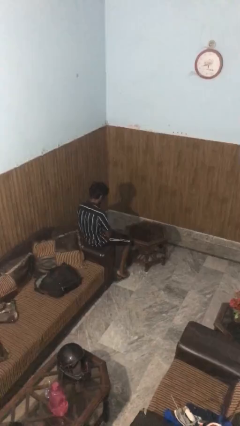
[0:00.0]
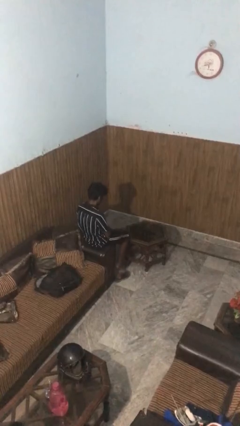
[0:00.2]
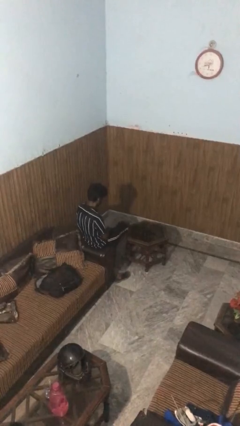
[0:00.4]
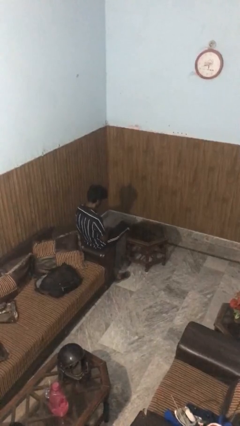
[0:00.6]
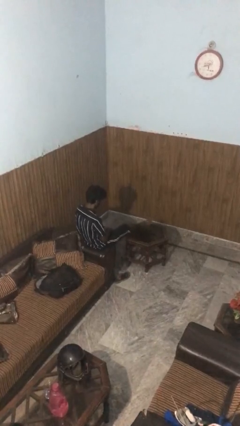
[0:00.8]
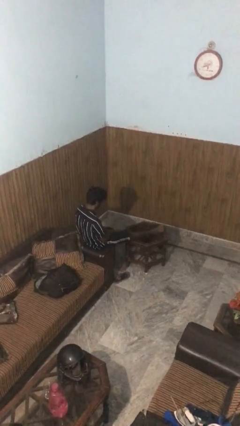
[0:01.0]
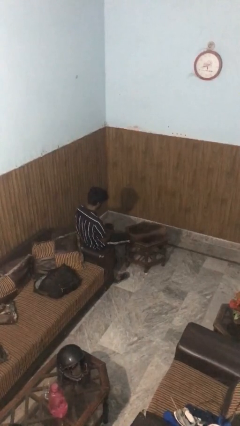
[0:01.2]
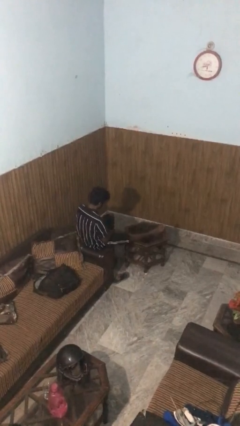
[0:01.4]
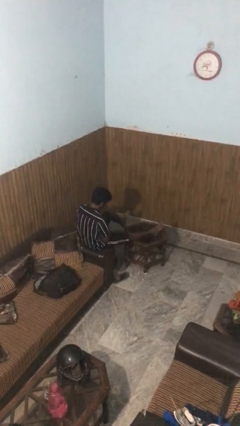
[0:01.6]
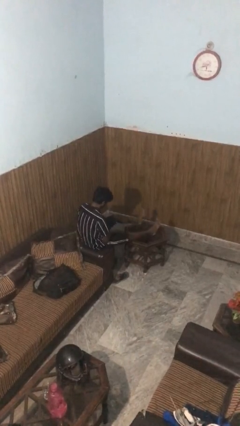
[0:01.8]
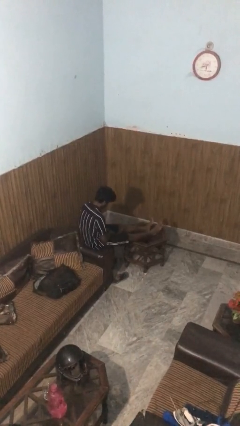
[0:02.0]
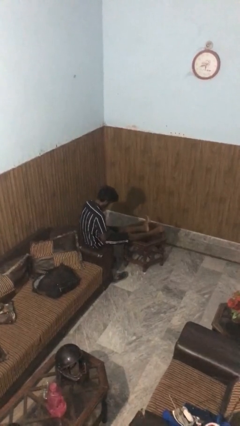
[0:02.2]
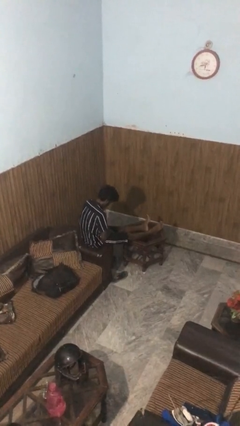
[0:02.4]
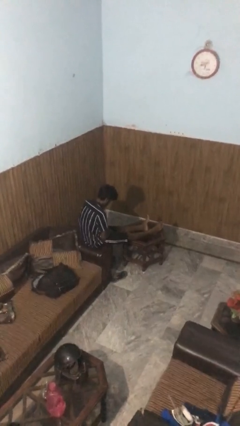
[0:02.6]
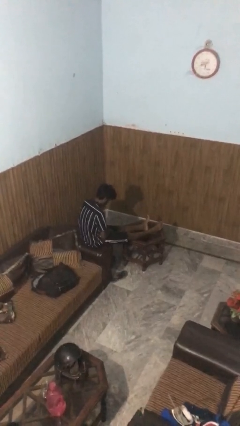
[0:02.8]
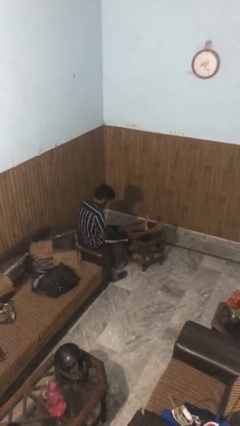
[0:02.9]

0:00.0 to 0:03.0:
person puts feet up

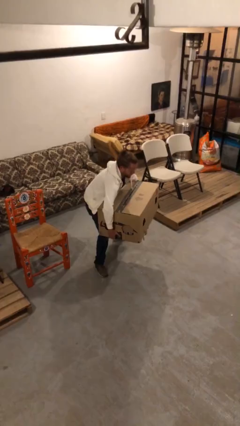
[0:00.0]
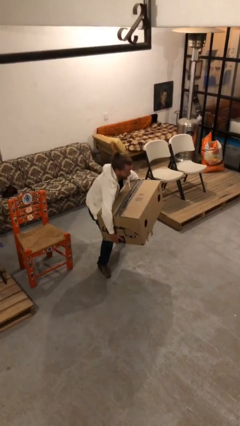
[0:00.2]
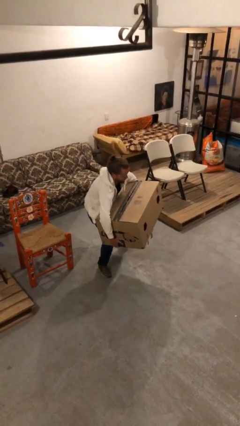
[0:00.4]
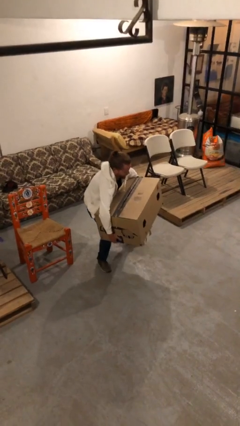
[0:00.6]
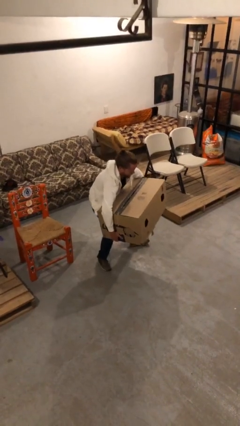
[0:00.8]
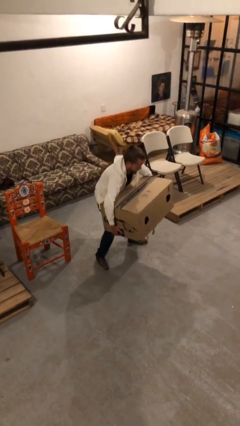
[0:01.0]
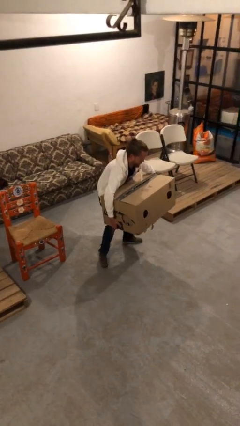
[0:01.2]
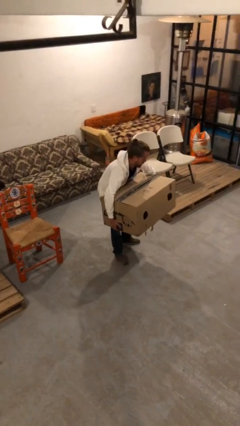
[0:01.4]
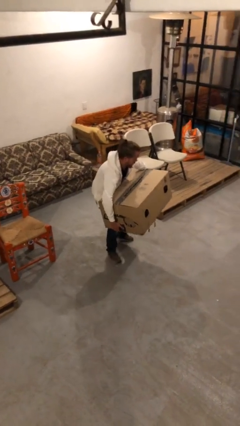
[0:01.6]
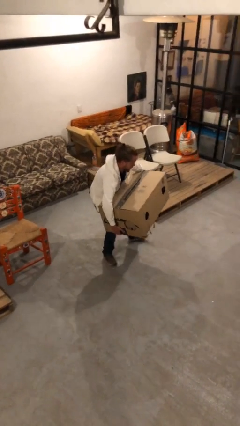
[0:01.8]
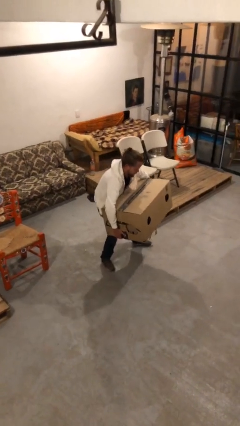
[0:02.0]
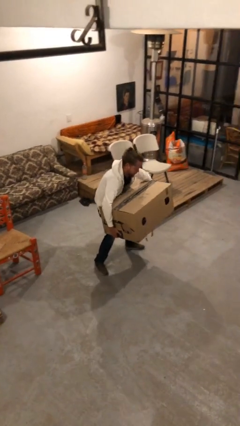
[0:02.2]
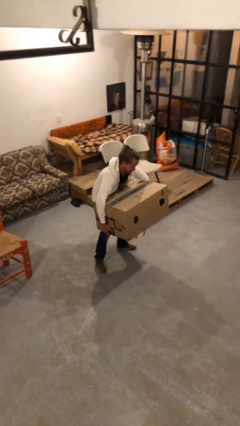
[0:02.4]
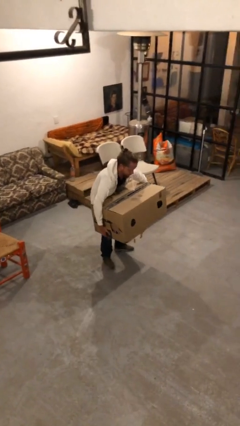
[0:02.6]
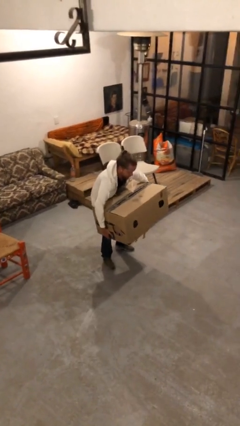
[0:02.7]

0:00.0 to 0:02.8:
person carries heavy object

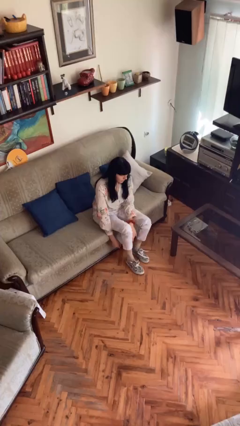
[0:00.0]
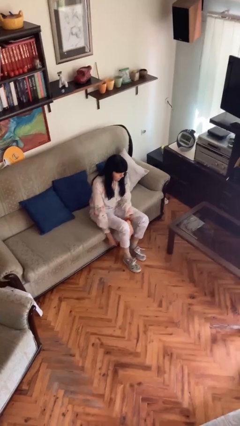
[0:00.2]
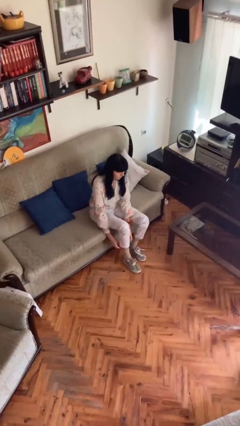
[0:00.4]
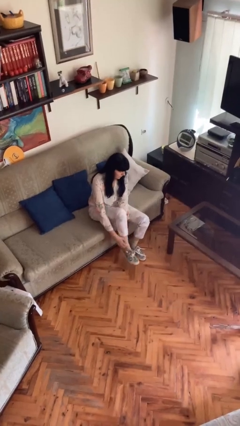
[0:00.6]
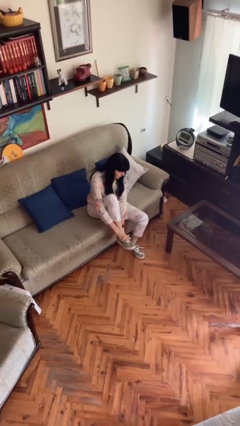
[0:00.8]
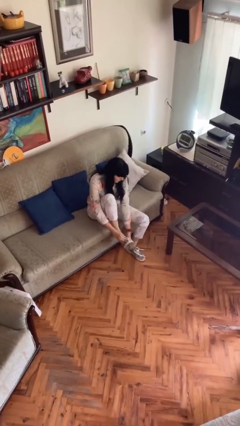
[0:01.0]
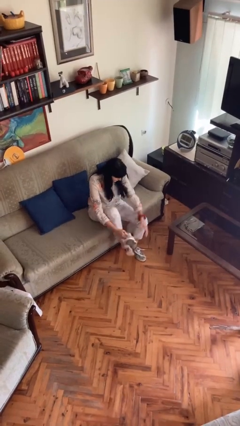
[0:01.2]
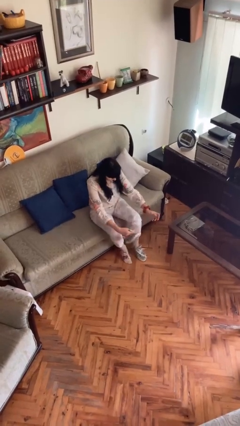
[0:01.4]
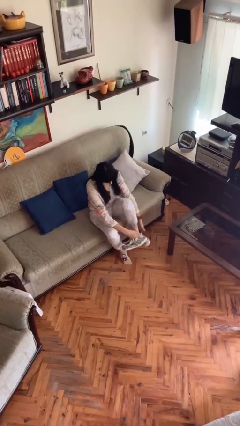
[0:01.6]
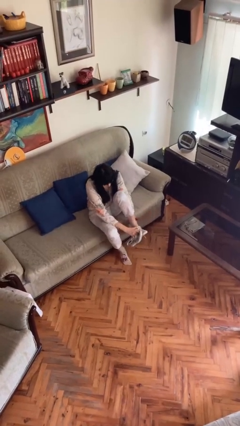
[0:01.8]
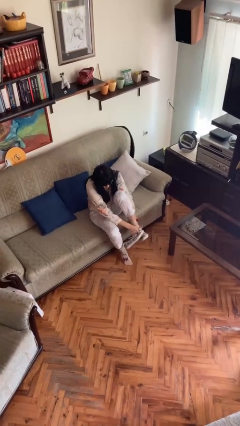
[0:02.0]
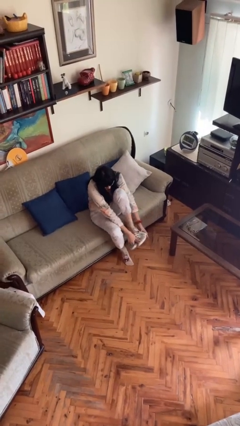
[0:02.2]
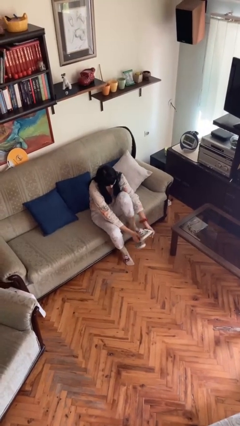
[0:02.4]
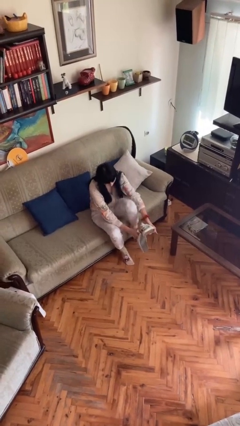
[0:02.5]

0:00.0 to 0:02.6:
person takes off shoes

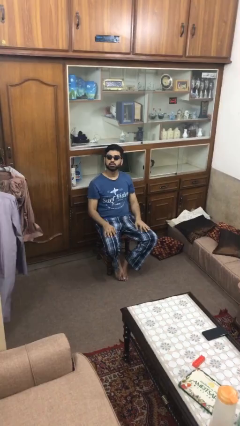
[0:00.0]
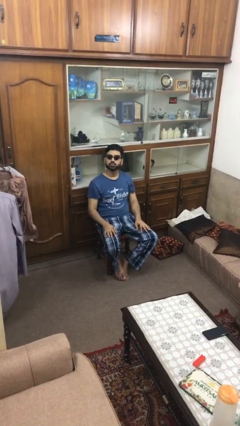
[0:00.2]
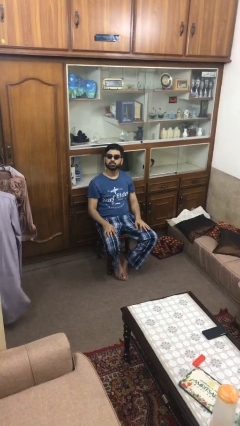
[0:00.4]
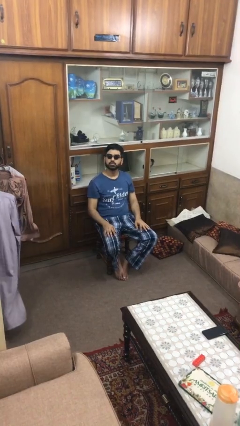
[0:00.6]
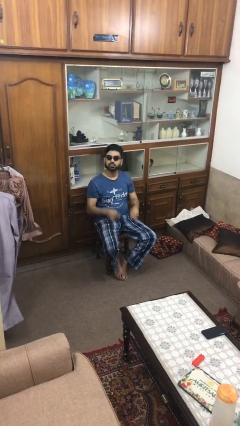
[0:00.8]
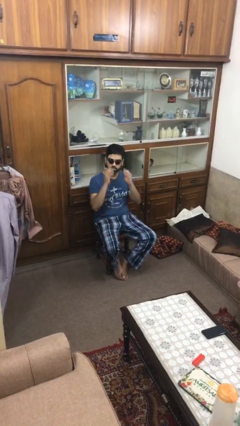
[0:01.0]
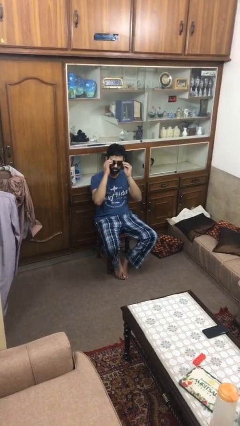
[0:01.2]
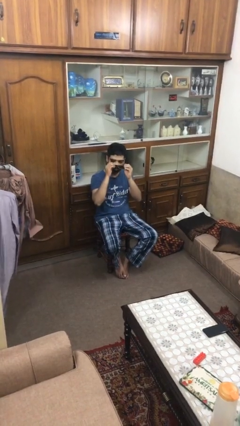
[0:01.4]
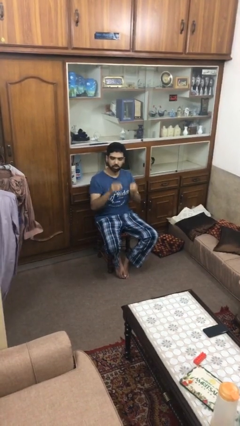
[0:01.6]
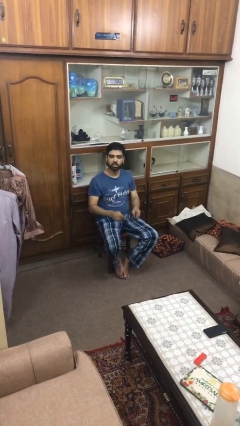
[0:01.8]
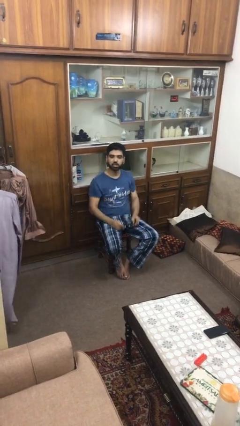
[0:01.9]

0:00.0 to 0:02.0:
person takes off sunglasses

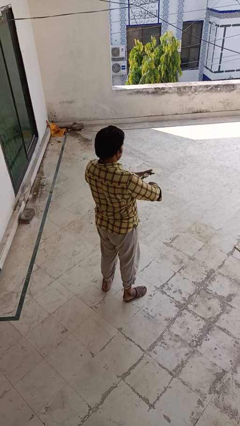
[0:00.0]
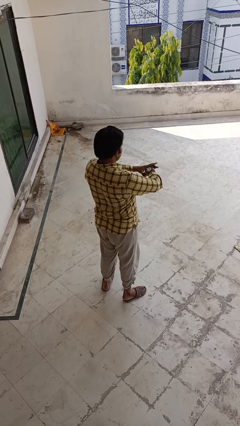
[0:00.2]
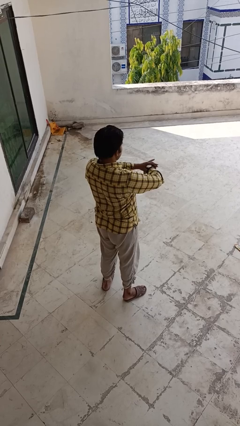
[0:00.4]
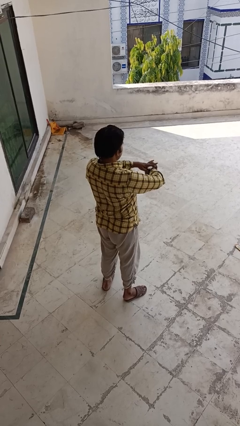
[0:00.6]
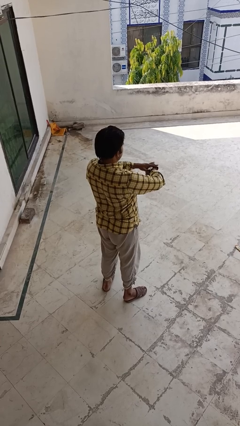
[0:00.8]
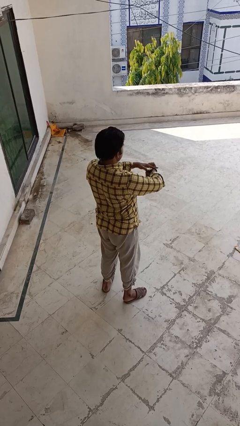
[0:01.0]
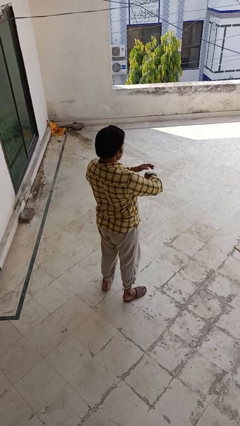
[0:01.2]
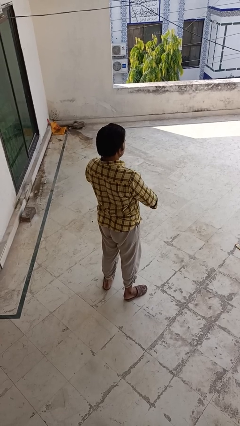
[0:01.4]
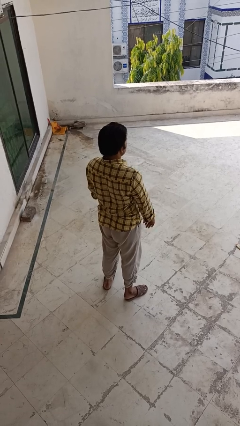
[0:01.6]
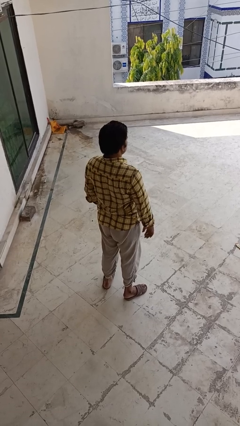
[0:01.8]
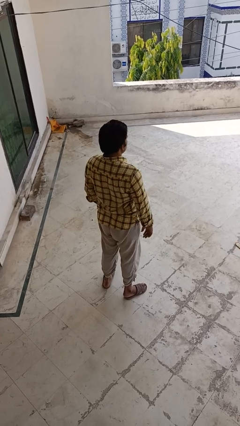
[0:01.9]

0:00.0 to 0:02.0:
person puts on wristwatch

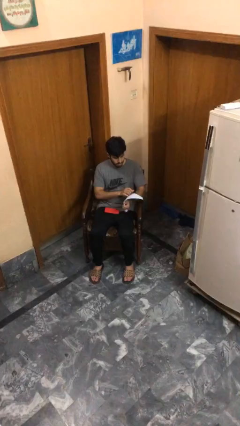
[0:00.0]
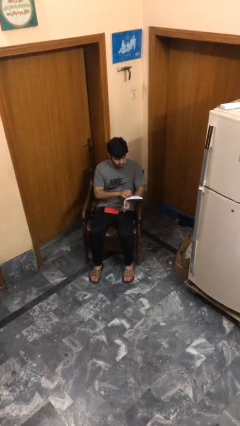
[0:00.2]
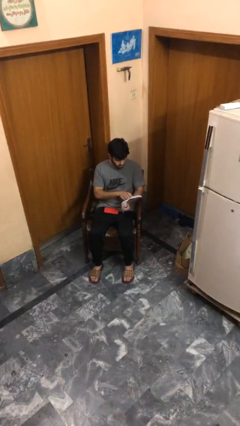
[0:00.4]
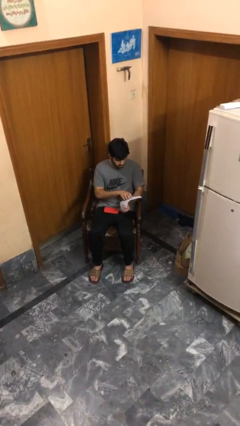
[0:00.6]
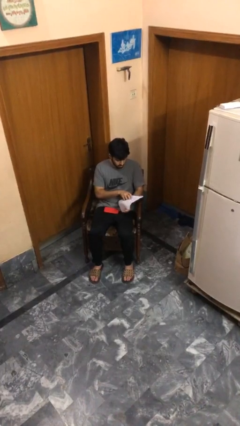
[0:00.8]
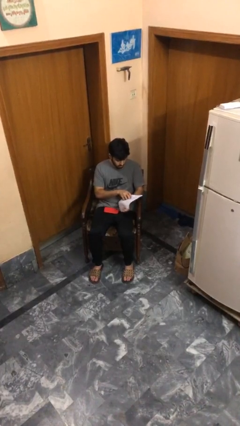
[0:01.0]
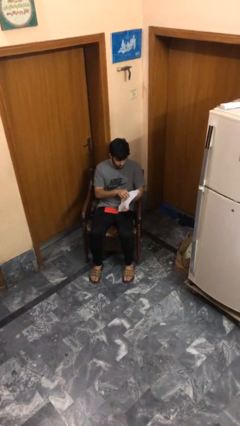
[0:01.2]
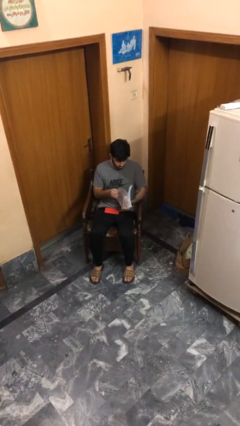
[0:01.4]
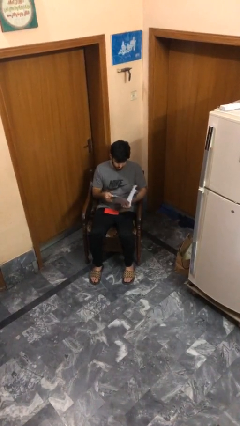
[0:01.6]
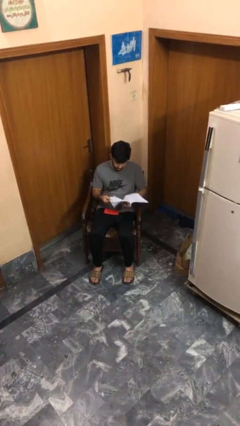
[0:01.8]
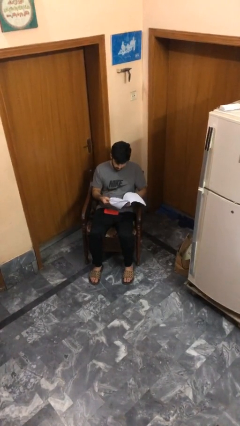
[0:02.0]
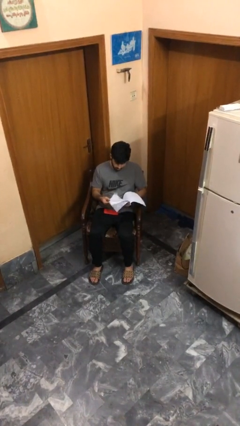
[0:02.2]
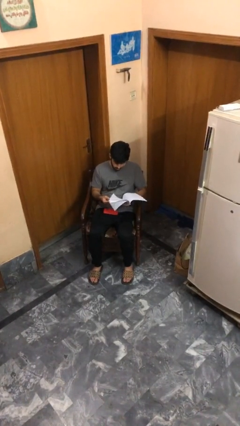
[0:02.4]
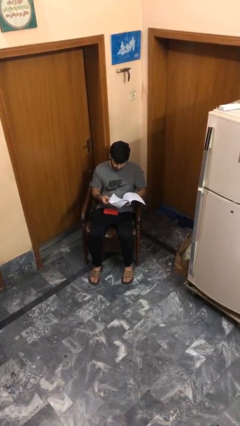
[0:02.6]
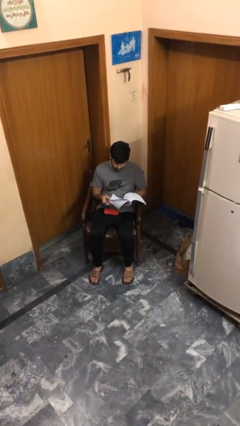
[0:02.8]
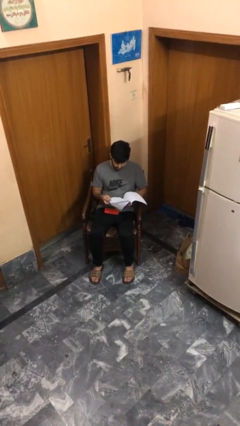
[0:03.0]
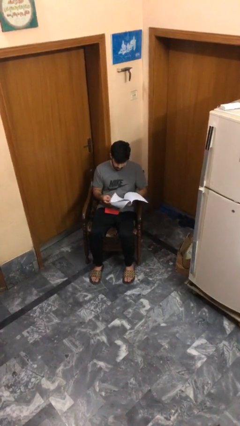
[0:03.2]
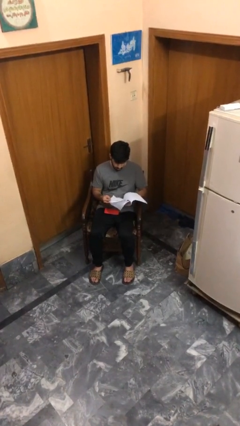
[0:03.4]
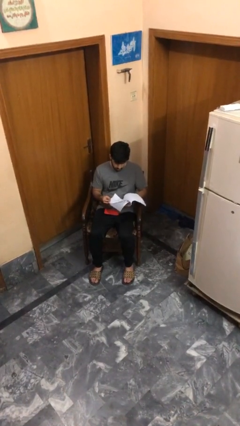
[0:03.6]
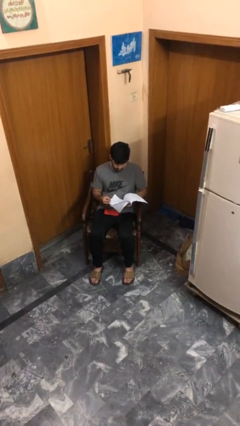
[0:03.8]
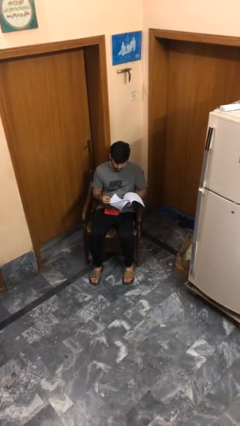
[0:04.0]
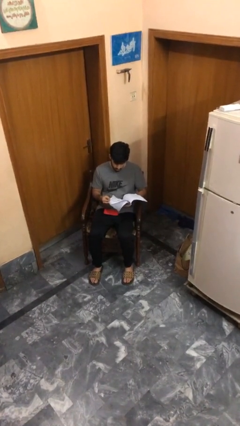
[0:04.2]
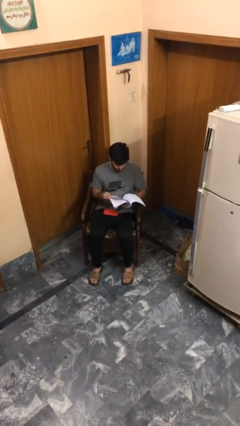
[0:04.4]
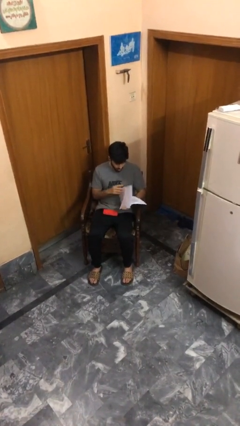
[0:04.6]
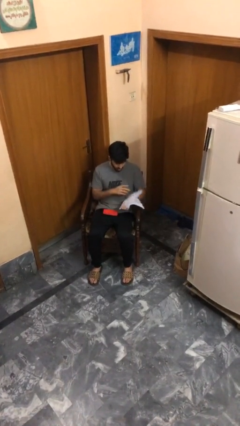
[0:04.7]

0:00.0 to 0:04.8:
person reads magazine

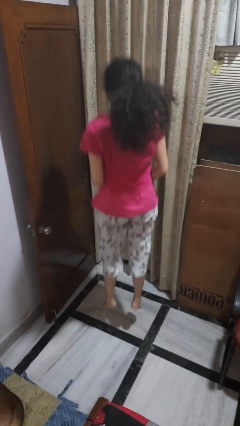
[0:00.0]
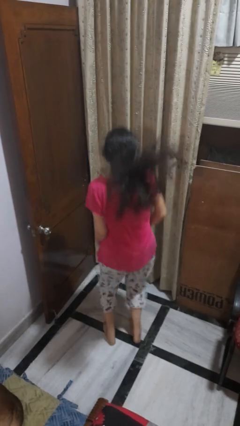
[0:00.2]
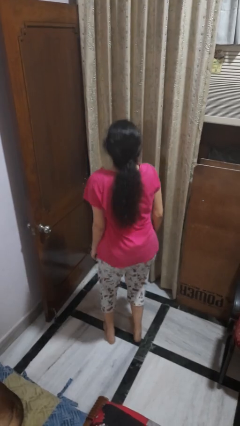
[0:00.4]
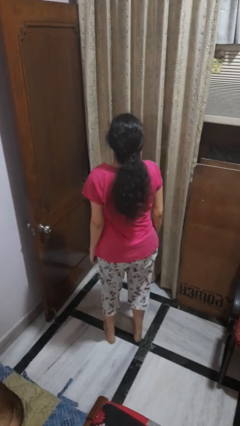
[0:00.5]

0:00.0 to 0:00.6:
person jumps
